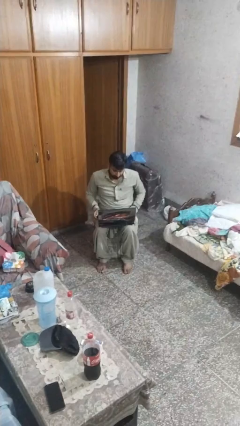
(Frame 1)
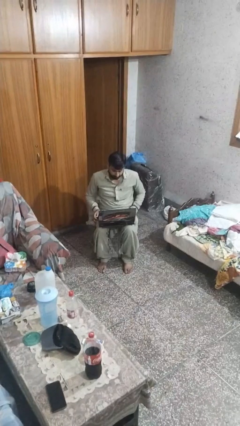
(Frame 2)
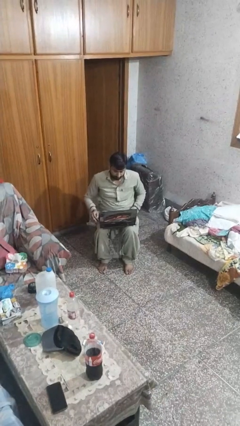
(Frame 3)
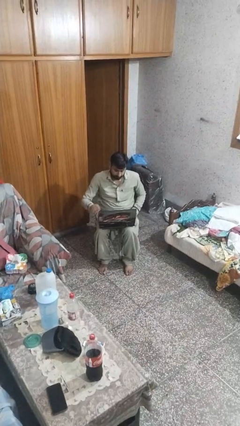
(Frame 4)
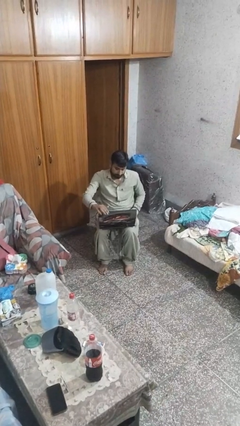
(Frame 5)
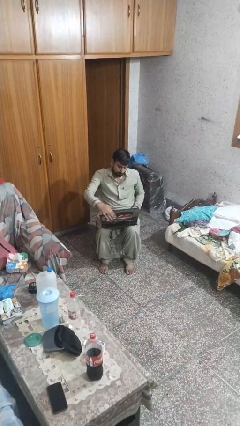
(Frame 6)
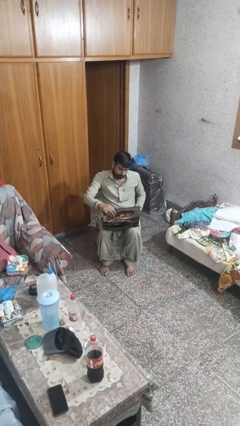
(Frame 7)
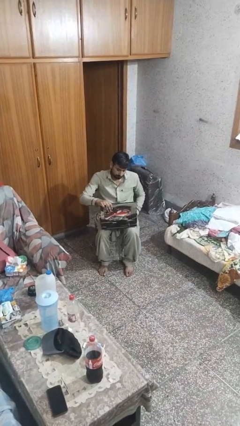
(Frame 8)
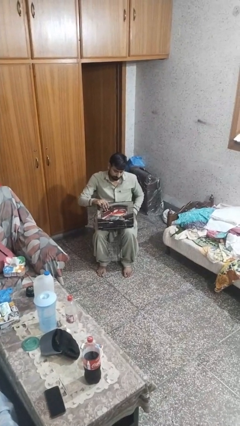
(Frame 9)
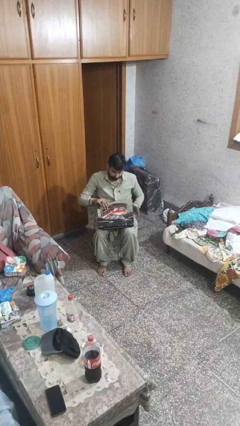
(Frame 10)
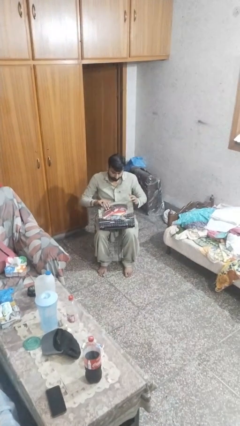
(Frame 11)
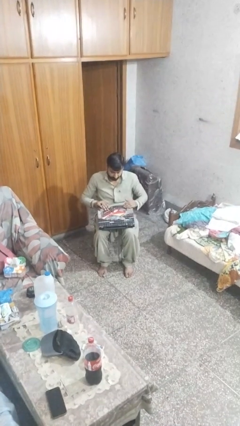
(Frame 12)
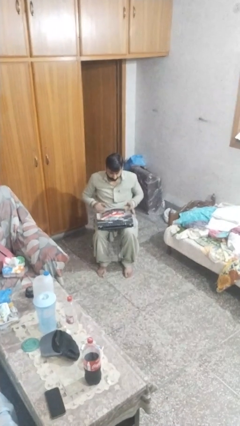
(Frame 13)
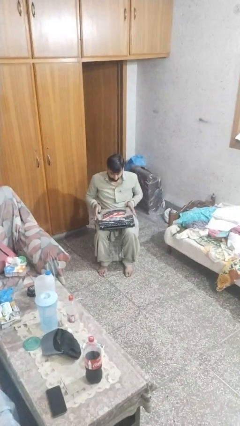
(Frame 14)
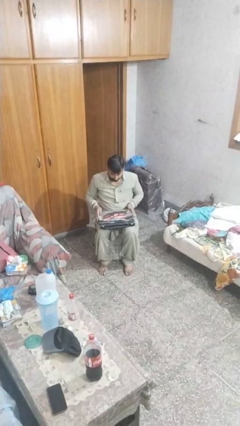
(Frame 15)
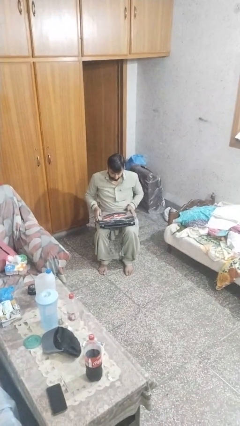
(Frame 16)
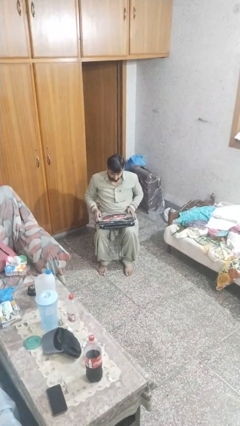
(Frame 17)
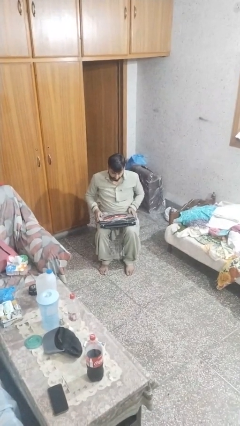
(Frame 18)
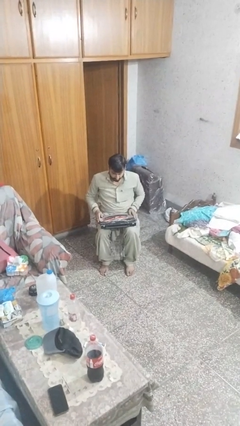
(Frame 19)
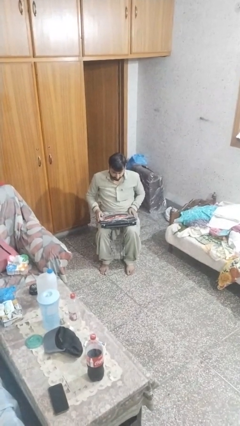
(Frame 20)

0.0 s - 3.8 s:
person closes laptop

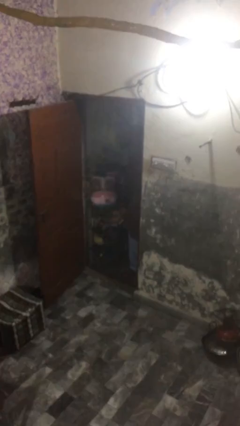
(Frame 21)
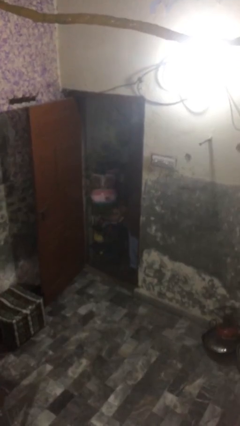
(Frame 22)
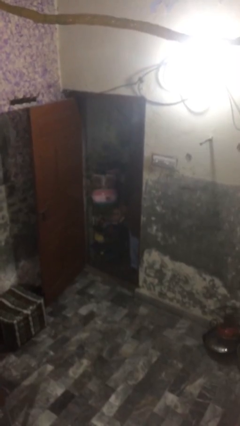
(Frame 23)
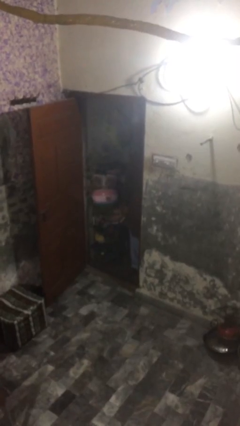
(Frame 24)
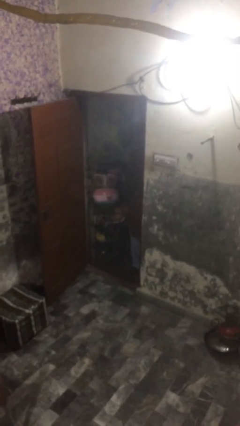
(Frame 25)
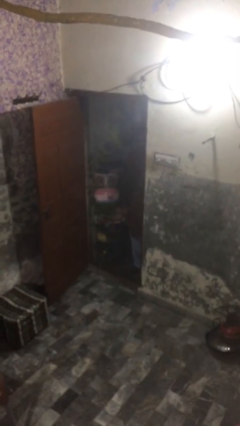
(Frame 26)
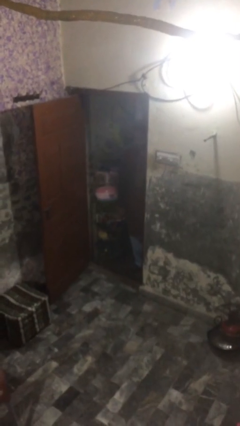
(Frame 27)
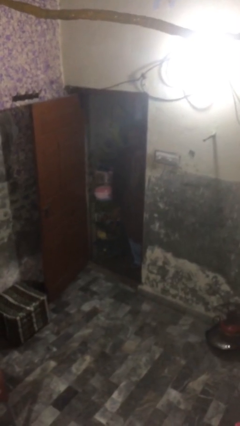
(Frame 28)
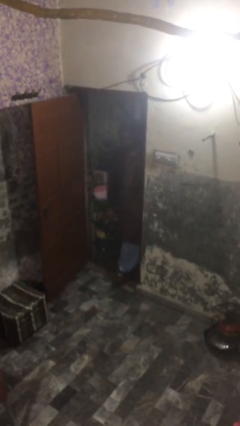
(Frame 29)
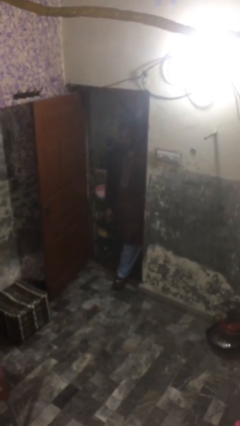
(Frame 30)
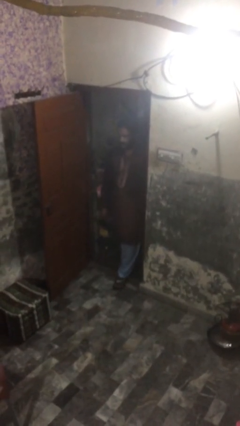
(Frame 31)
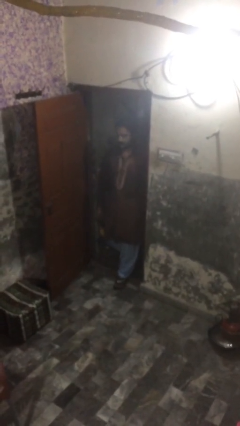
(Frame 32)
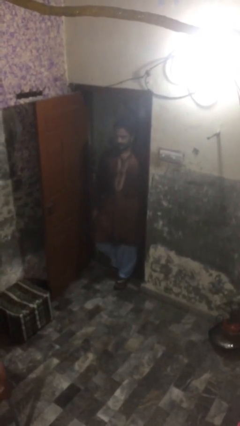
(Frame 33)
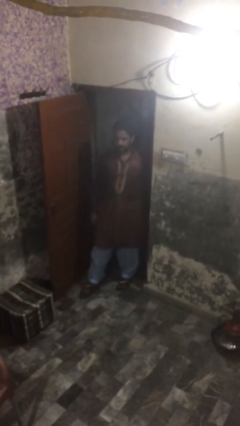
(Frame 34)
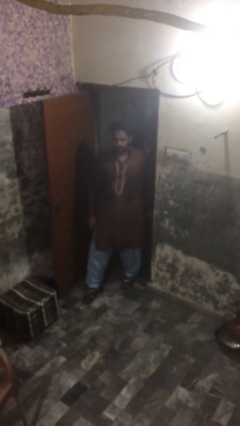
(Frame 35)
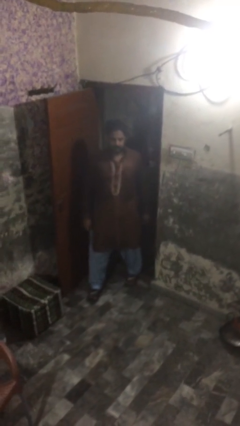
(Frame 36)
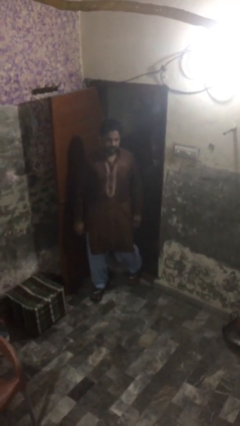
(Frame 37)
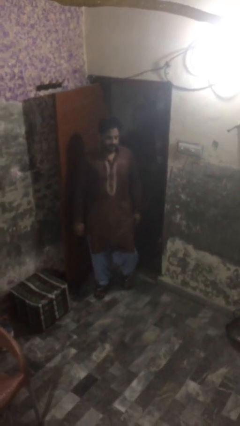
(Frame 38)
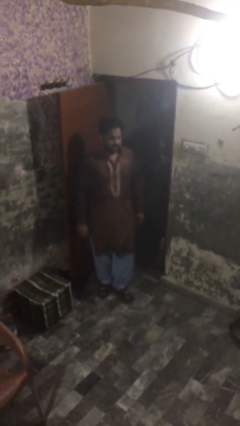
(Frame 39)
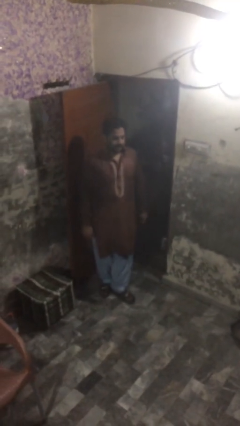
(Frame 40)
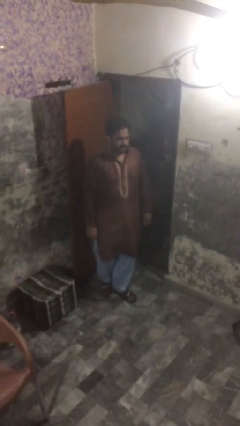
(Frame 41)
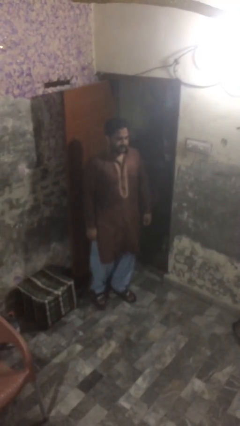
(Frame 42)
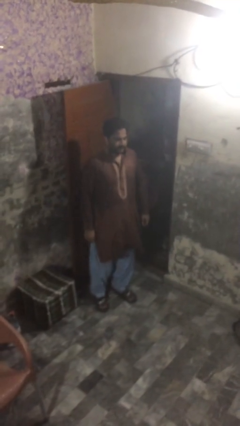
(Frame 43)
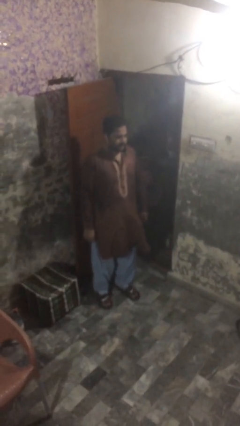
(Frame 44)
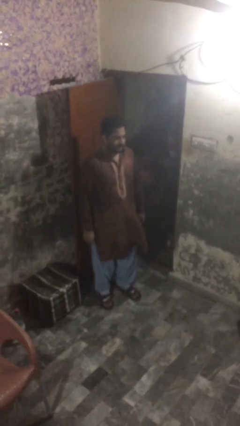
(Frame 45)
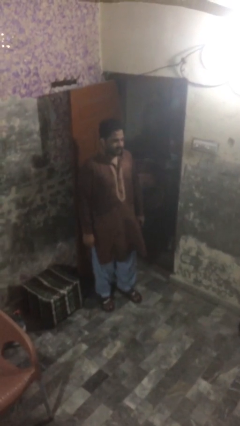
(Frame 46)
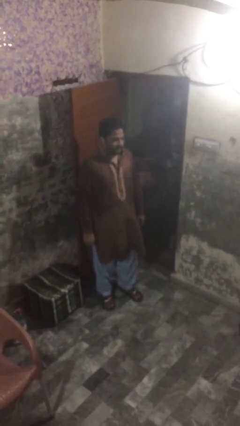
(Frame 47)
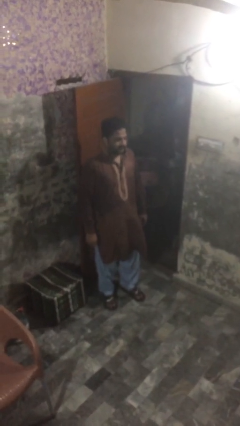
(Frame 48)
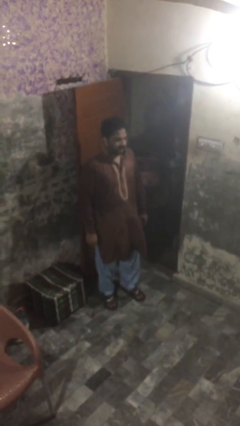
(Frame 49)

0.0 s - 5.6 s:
person enters scene through structure

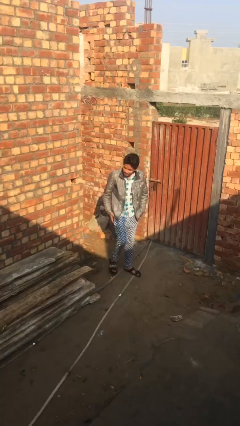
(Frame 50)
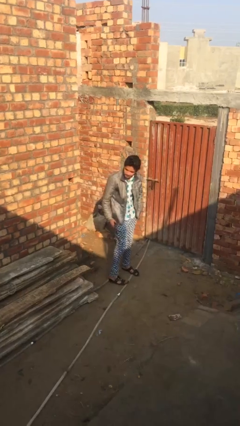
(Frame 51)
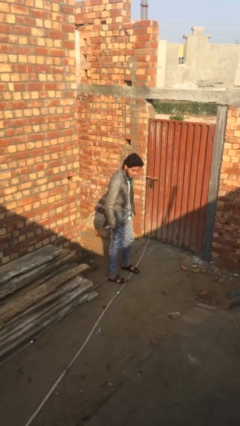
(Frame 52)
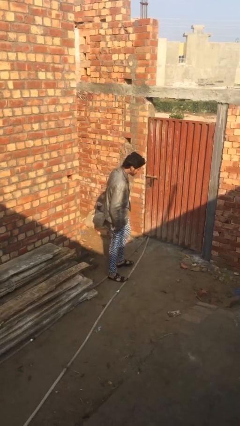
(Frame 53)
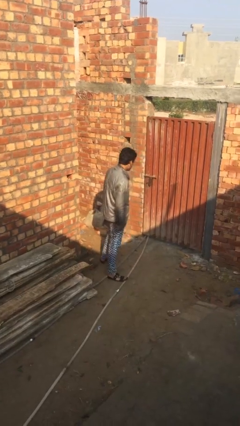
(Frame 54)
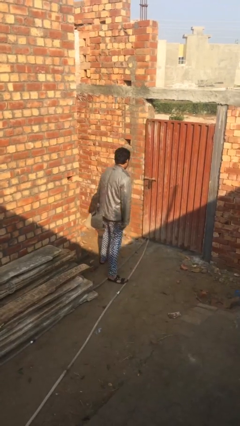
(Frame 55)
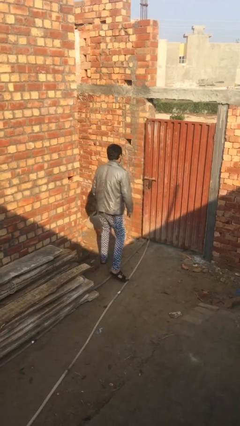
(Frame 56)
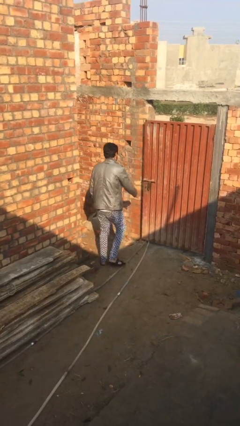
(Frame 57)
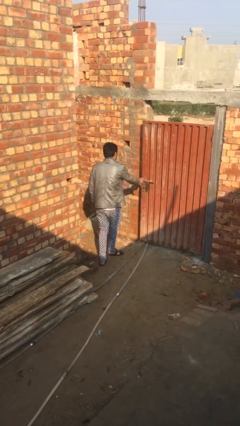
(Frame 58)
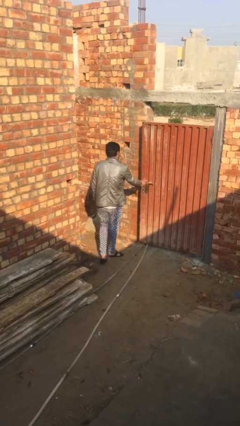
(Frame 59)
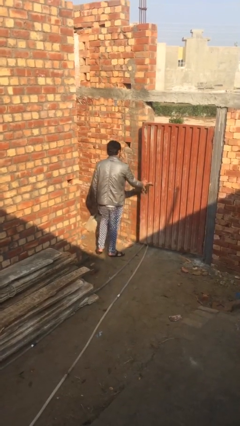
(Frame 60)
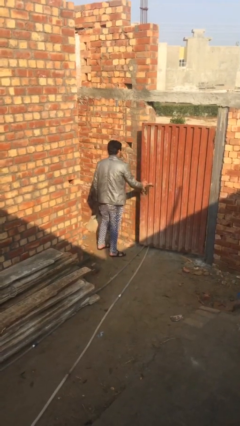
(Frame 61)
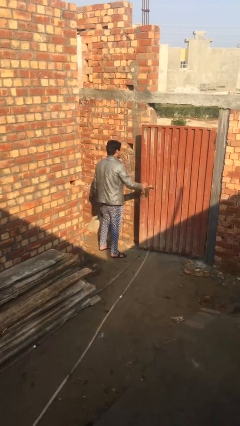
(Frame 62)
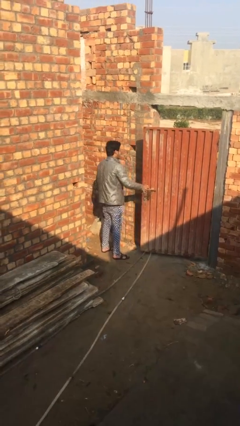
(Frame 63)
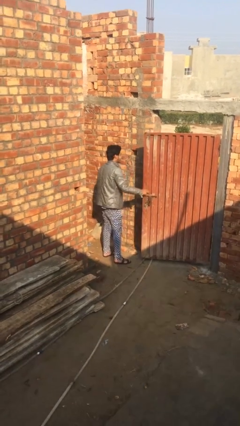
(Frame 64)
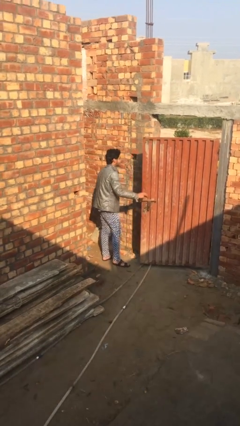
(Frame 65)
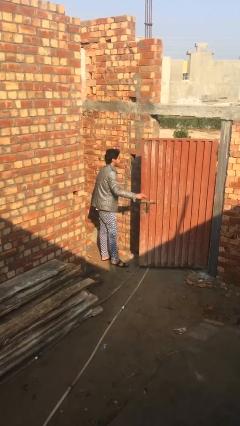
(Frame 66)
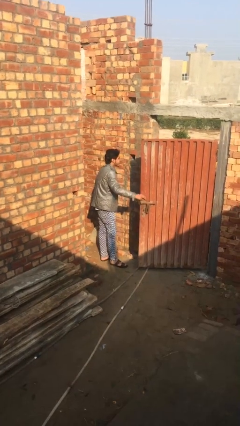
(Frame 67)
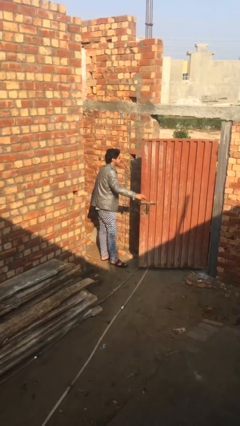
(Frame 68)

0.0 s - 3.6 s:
person opens facility door

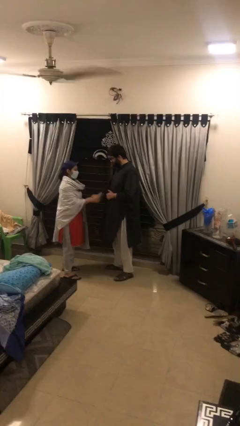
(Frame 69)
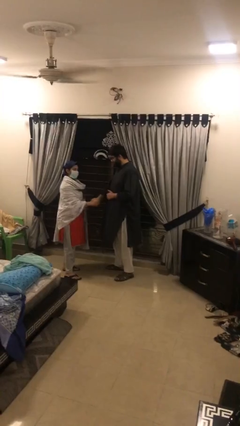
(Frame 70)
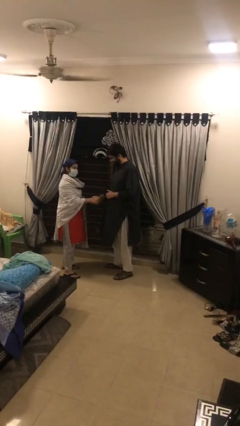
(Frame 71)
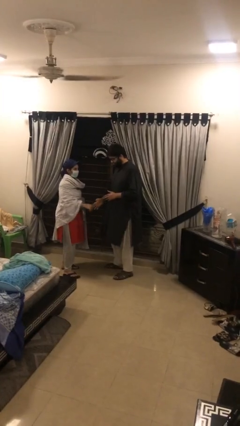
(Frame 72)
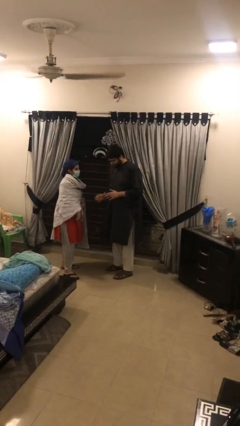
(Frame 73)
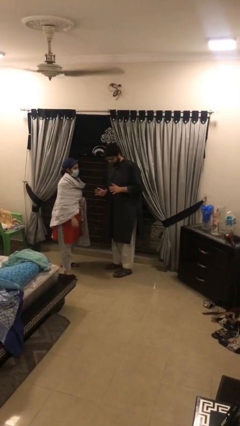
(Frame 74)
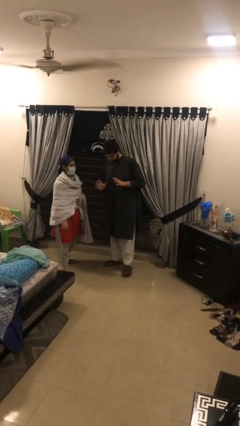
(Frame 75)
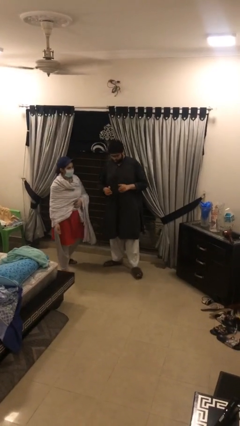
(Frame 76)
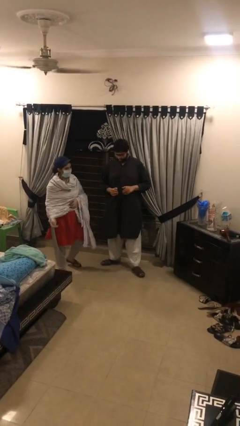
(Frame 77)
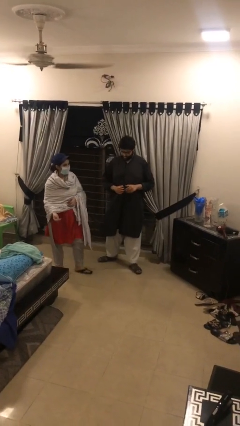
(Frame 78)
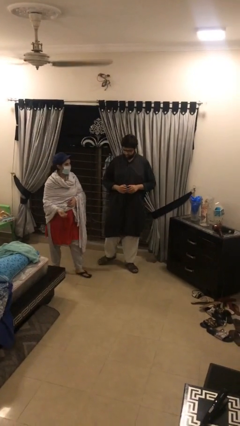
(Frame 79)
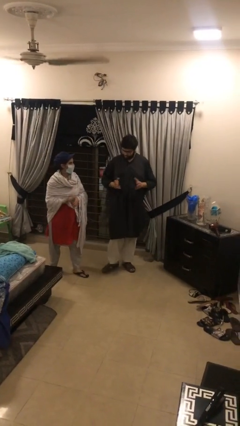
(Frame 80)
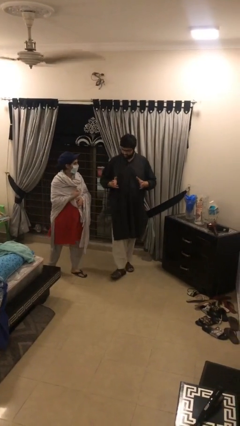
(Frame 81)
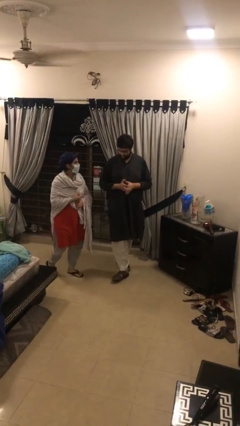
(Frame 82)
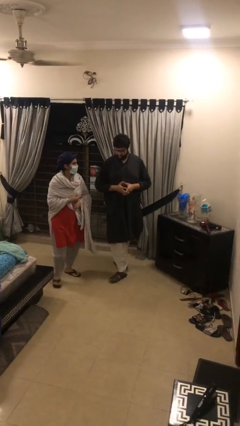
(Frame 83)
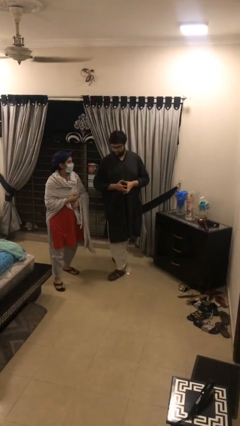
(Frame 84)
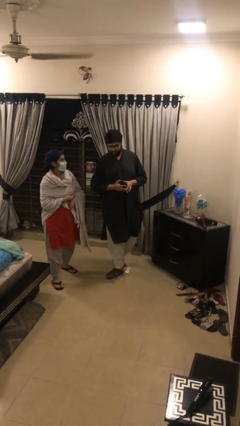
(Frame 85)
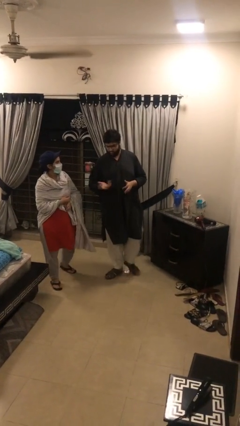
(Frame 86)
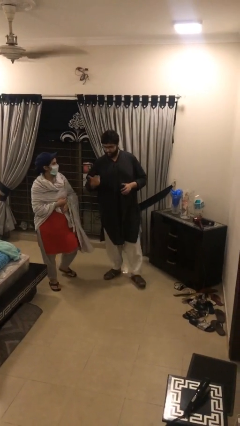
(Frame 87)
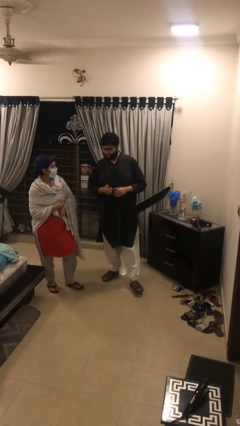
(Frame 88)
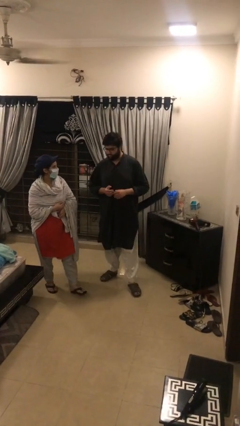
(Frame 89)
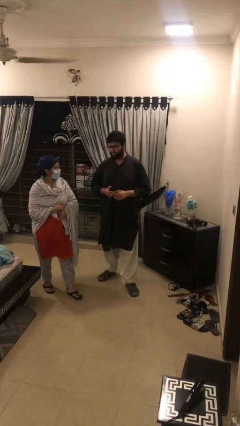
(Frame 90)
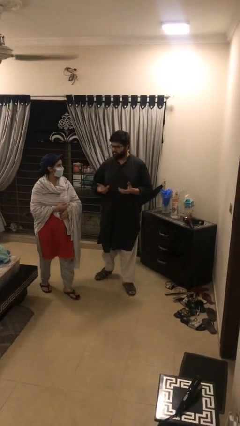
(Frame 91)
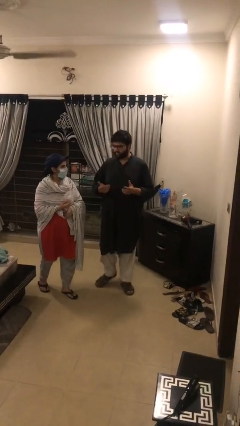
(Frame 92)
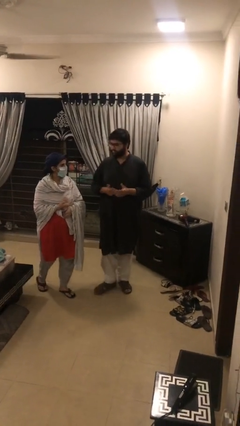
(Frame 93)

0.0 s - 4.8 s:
person talks to person
